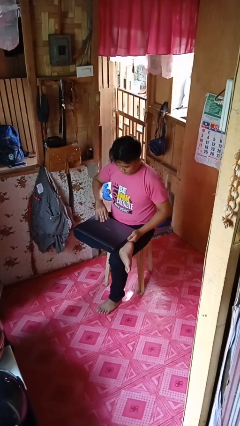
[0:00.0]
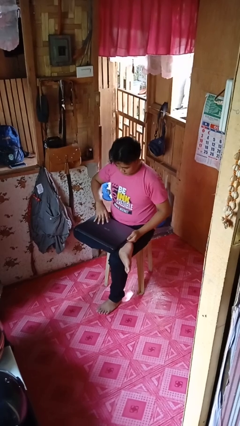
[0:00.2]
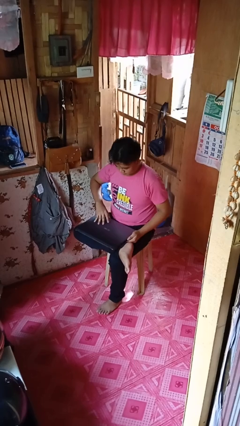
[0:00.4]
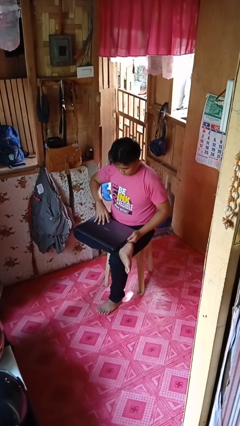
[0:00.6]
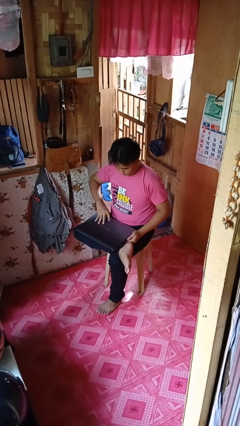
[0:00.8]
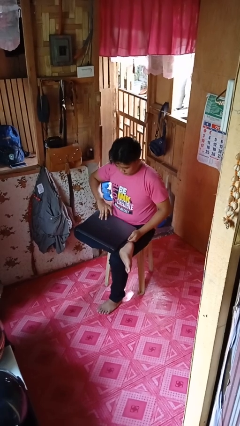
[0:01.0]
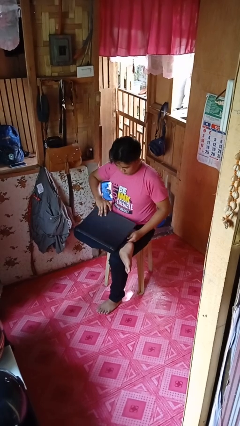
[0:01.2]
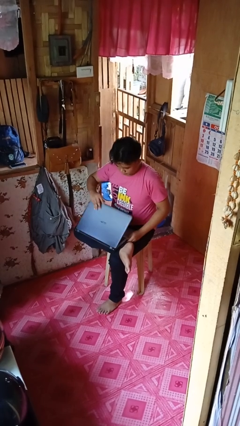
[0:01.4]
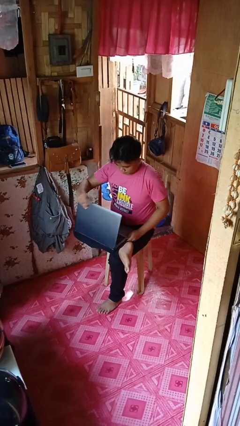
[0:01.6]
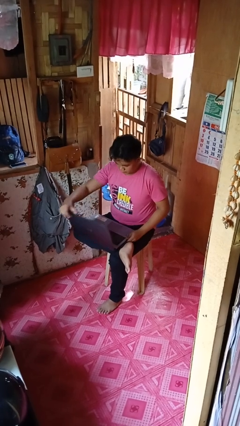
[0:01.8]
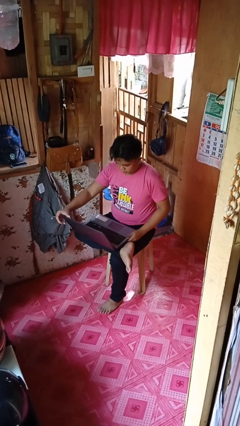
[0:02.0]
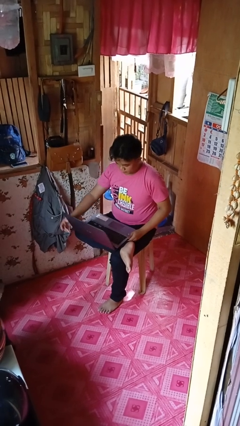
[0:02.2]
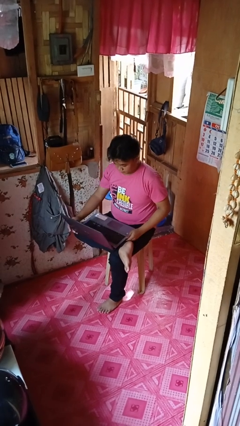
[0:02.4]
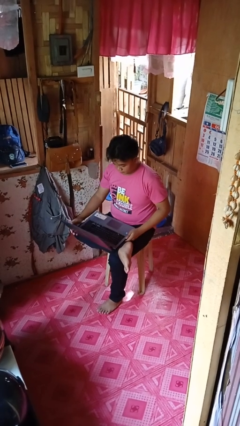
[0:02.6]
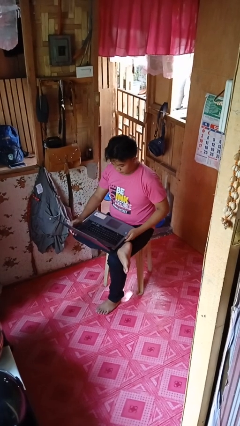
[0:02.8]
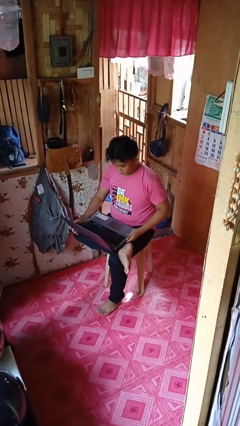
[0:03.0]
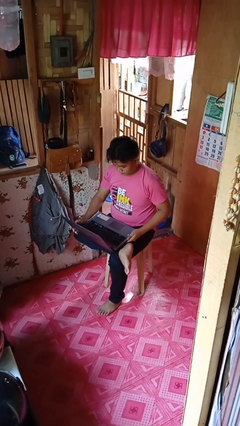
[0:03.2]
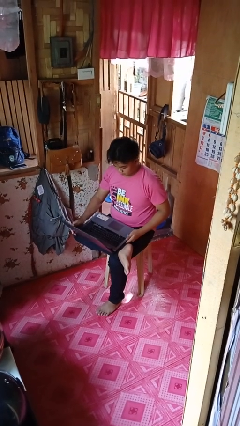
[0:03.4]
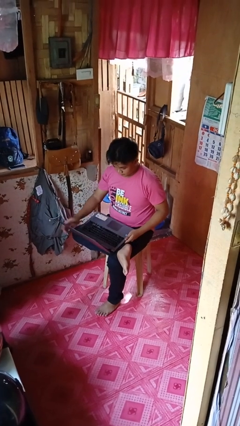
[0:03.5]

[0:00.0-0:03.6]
person opens laptop

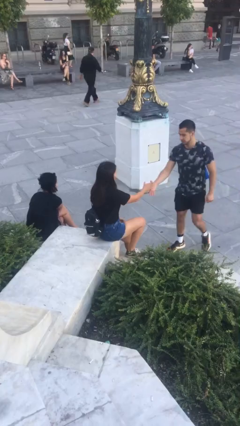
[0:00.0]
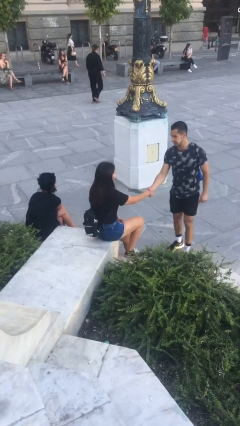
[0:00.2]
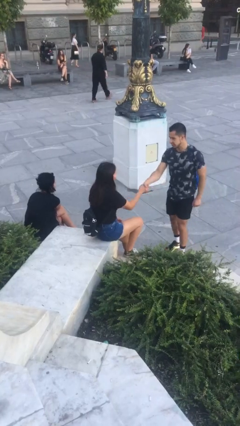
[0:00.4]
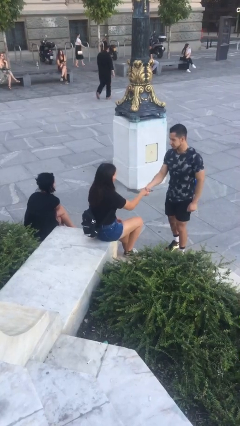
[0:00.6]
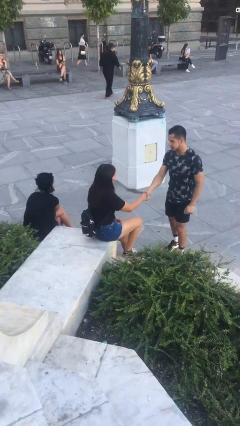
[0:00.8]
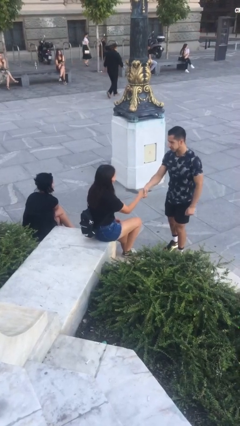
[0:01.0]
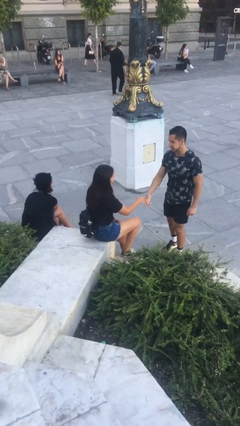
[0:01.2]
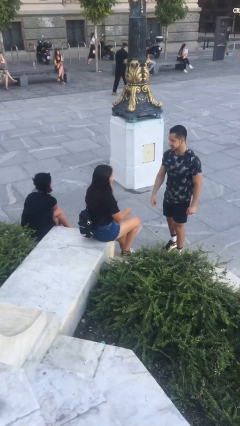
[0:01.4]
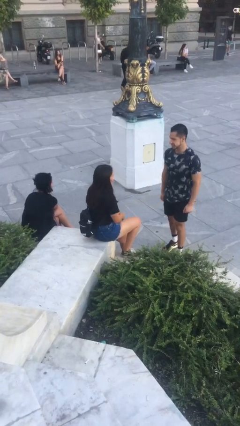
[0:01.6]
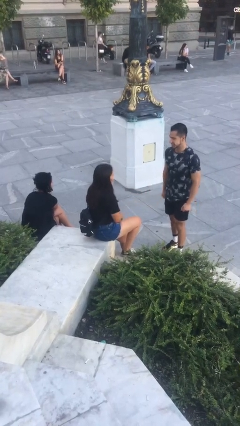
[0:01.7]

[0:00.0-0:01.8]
person shakes hand

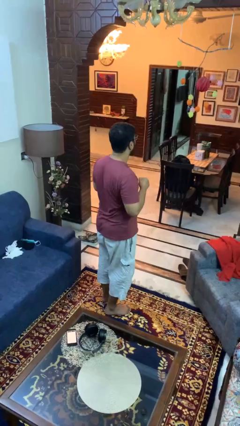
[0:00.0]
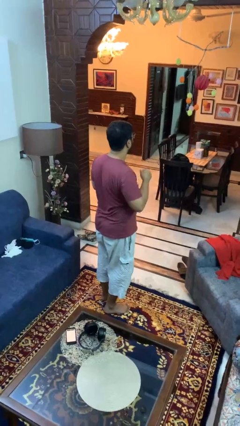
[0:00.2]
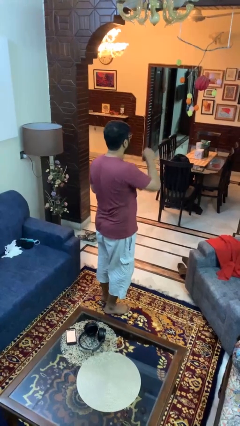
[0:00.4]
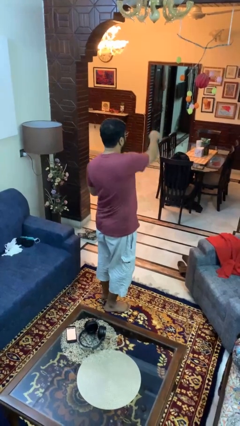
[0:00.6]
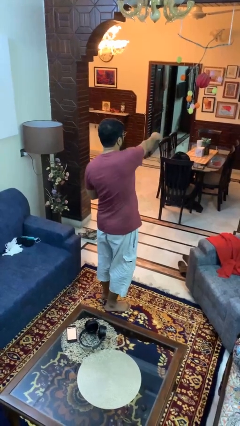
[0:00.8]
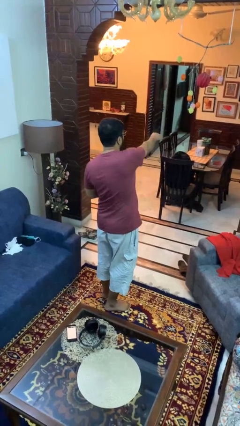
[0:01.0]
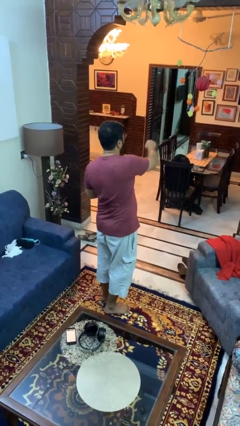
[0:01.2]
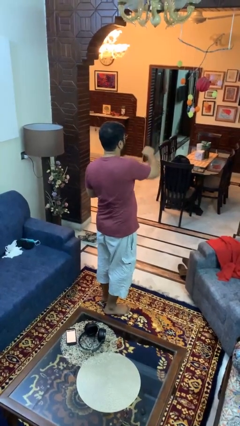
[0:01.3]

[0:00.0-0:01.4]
person karate chop

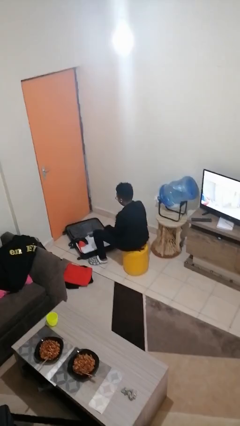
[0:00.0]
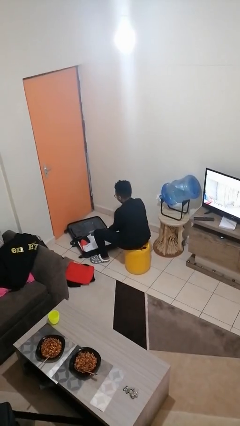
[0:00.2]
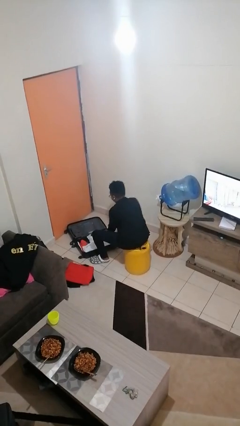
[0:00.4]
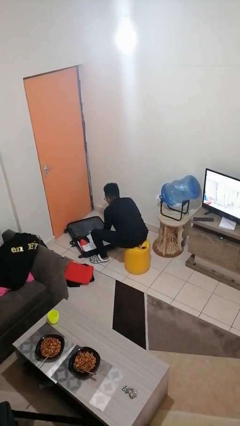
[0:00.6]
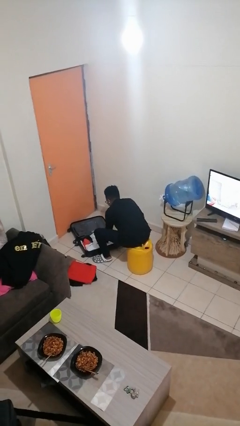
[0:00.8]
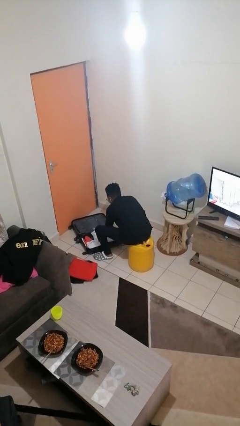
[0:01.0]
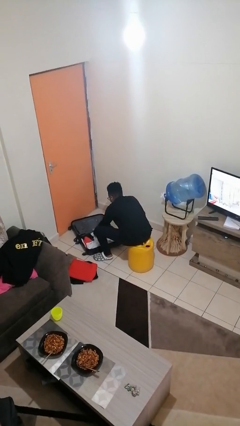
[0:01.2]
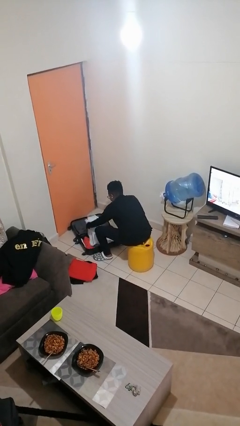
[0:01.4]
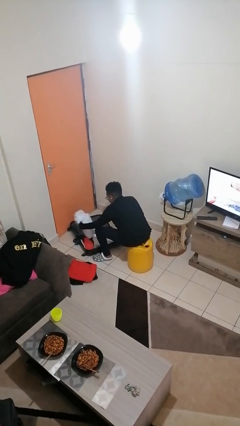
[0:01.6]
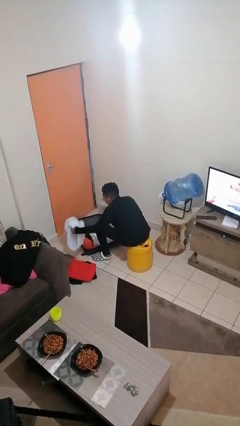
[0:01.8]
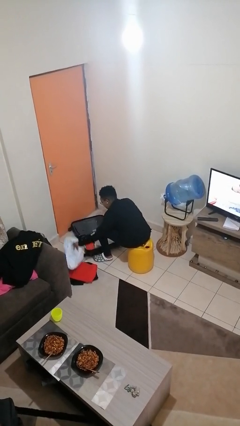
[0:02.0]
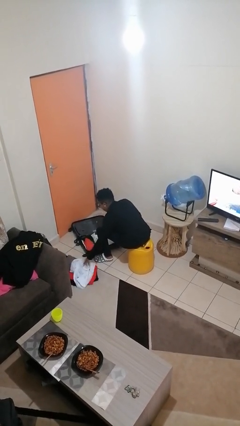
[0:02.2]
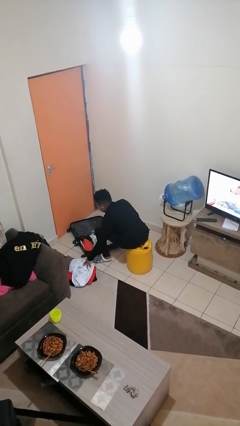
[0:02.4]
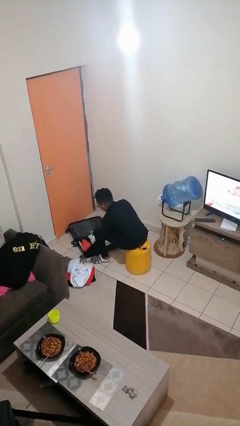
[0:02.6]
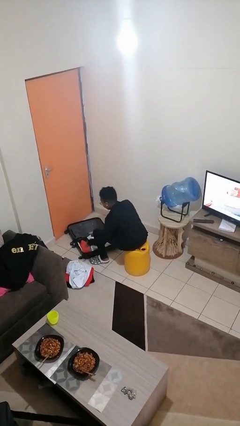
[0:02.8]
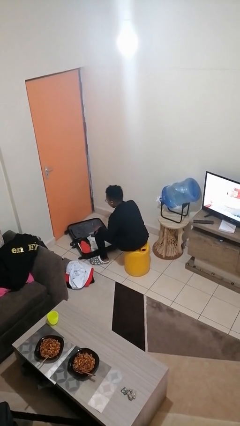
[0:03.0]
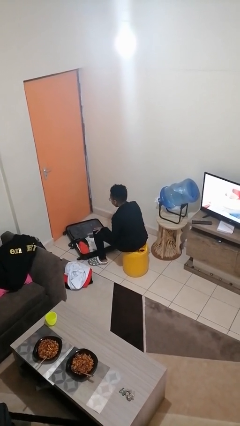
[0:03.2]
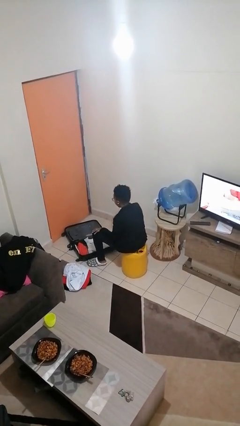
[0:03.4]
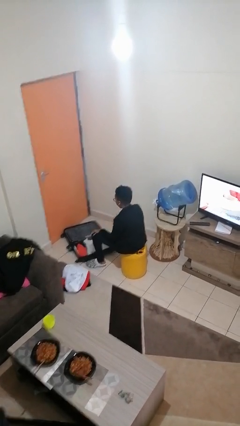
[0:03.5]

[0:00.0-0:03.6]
person unloads clothes from suitcase

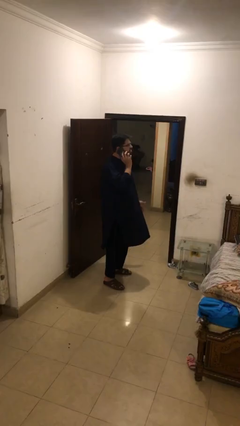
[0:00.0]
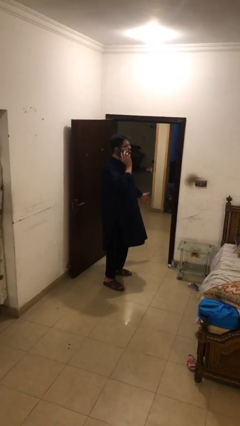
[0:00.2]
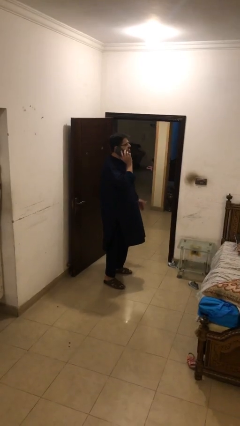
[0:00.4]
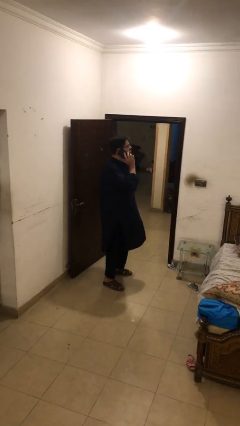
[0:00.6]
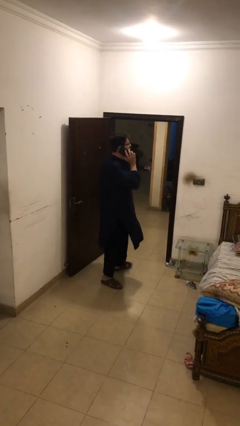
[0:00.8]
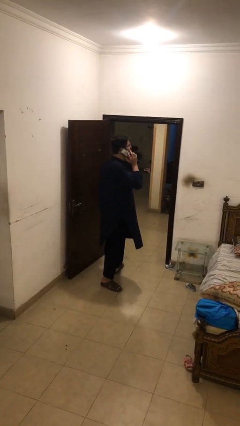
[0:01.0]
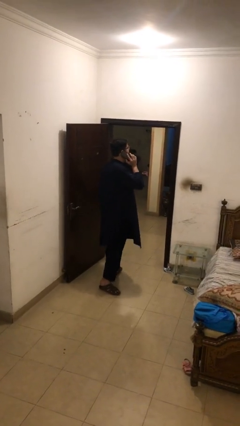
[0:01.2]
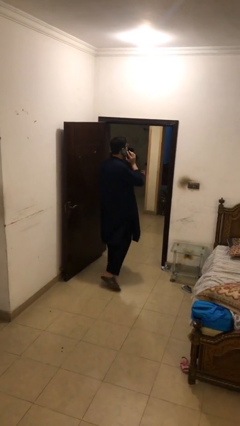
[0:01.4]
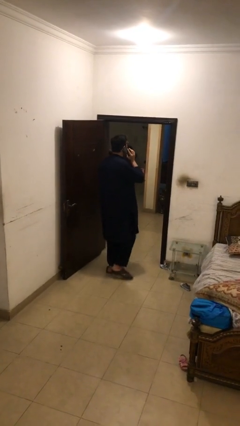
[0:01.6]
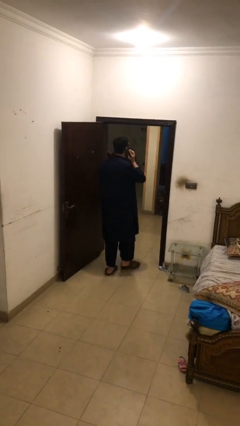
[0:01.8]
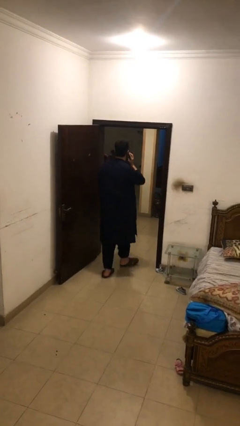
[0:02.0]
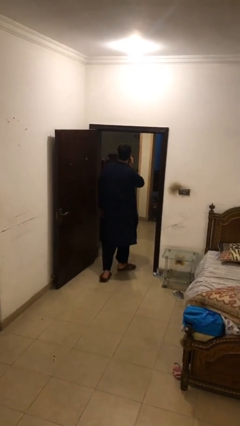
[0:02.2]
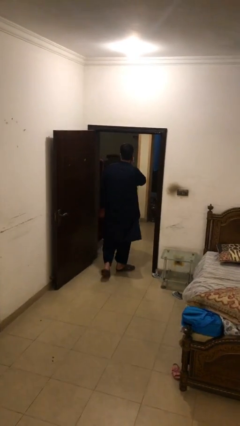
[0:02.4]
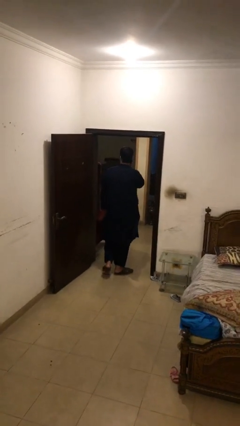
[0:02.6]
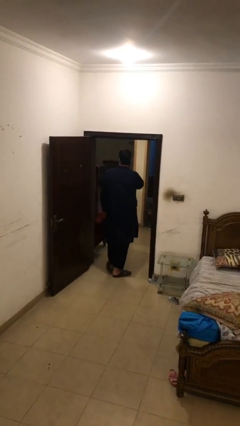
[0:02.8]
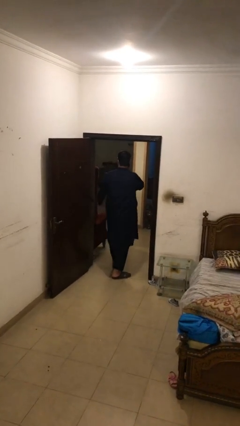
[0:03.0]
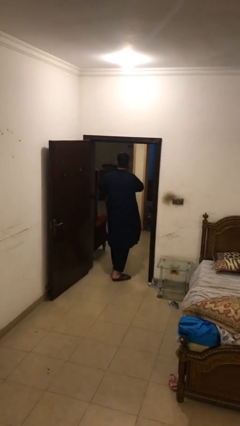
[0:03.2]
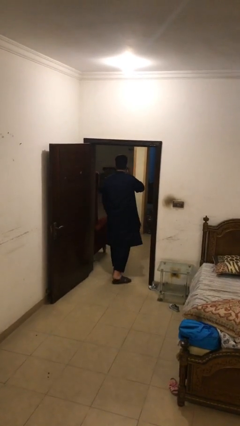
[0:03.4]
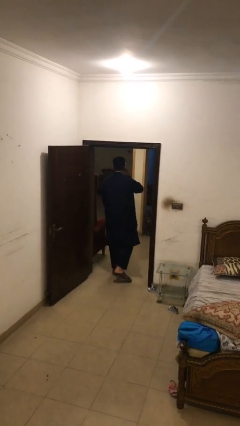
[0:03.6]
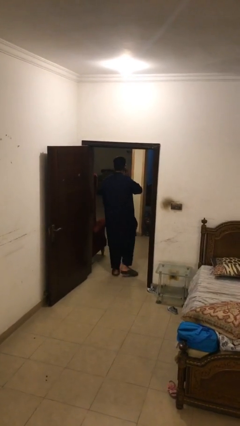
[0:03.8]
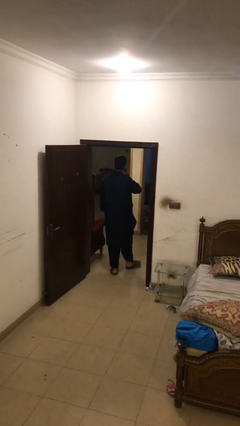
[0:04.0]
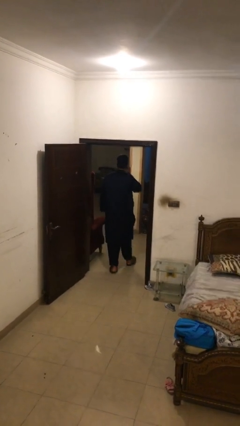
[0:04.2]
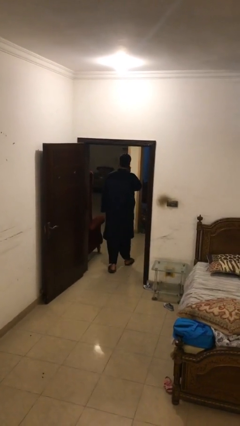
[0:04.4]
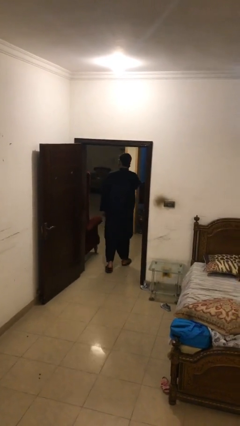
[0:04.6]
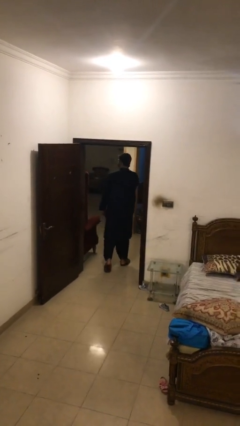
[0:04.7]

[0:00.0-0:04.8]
person exits scene through structure

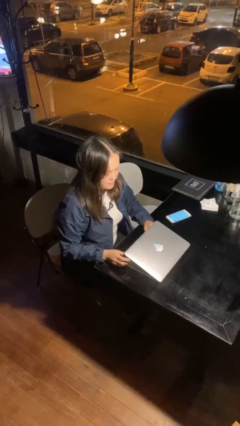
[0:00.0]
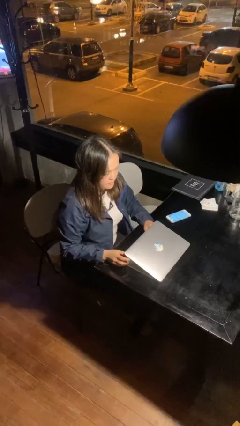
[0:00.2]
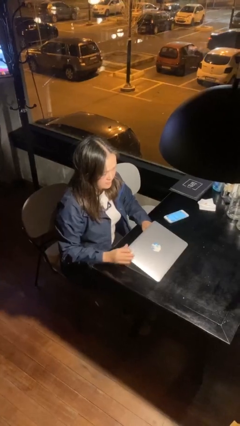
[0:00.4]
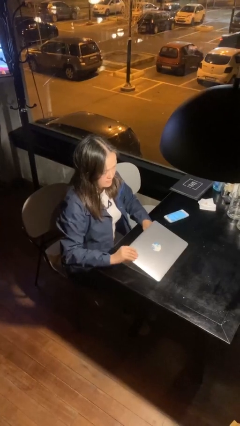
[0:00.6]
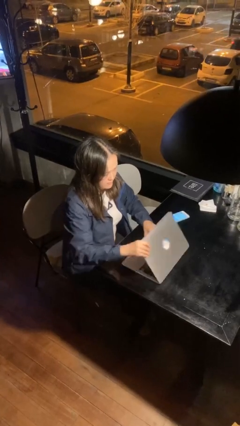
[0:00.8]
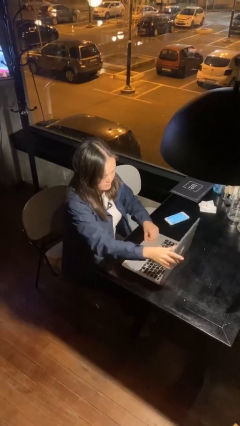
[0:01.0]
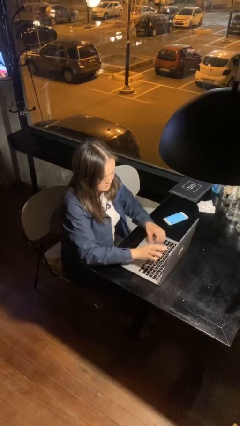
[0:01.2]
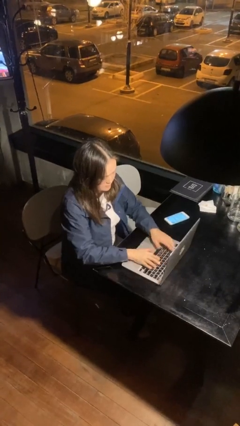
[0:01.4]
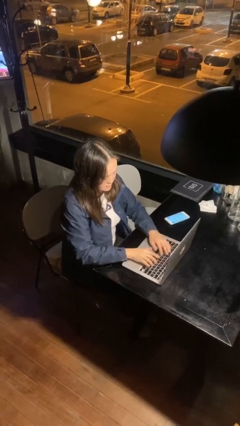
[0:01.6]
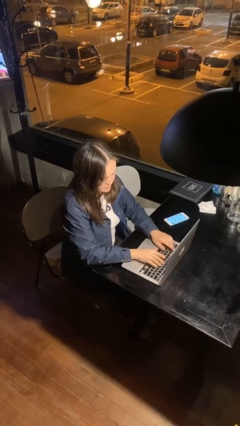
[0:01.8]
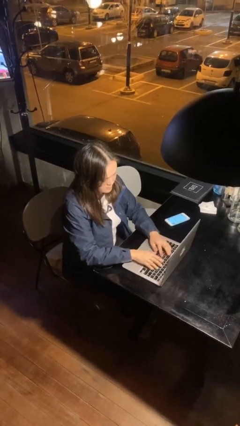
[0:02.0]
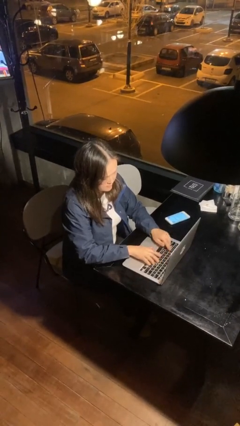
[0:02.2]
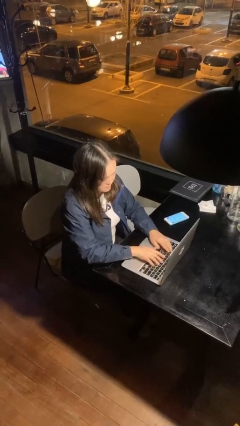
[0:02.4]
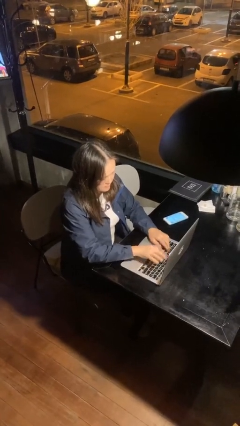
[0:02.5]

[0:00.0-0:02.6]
person interacts with laptop
